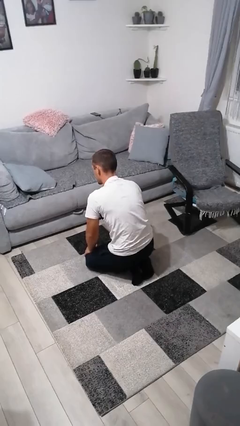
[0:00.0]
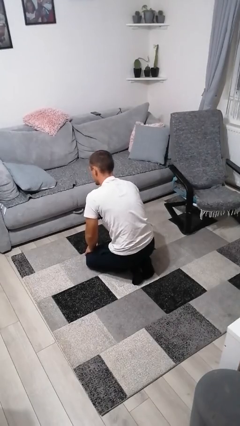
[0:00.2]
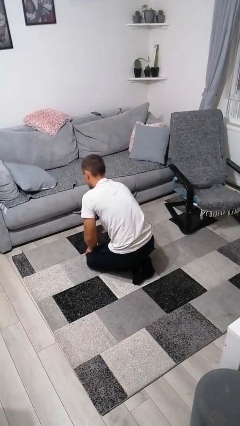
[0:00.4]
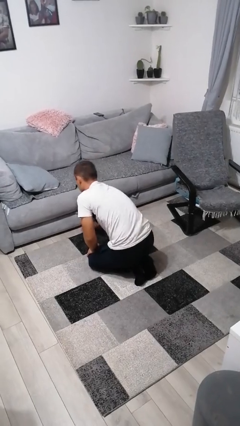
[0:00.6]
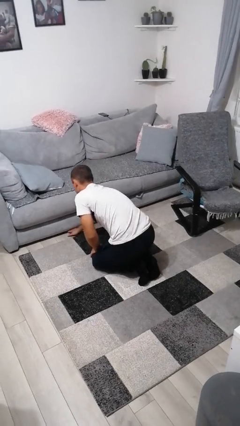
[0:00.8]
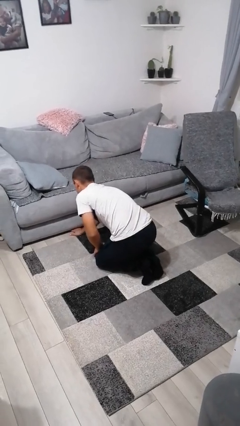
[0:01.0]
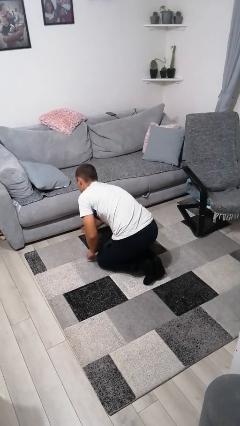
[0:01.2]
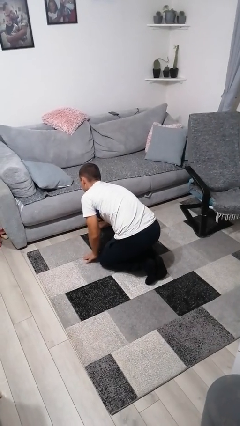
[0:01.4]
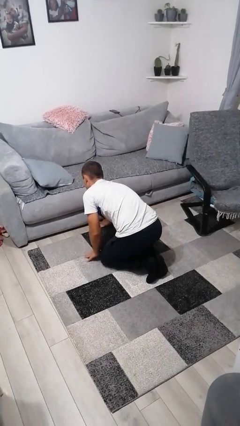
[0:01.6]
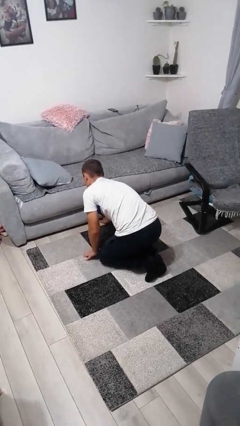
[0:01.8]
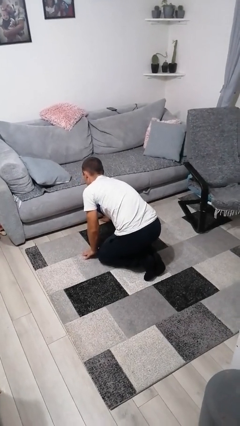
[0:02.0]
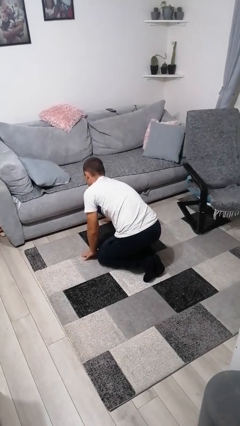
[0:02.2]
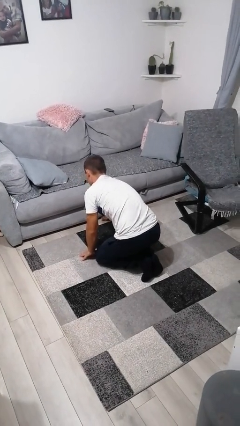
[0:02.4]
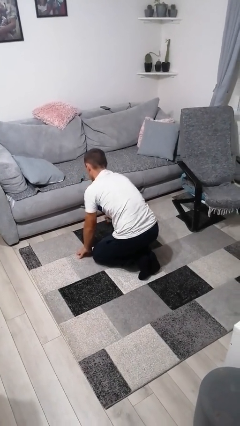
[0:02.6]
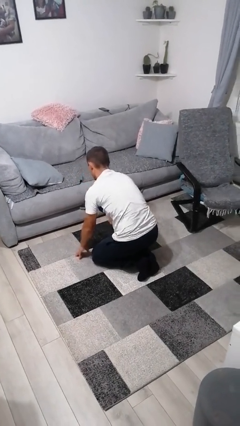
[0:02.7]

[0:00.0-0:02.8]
person searches under couch

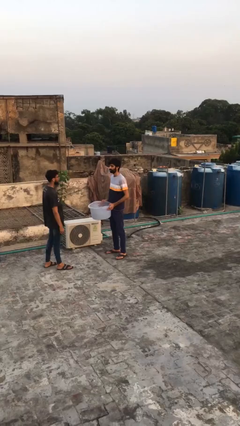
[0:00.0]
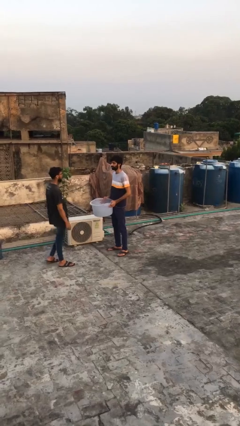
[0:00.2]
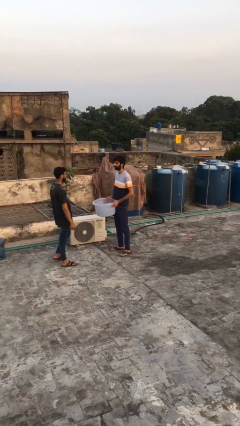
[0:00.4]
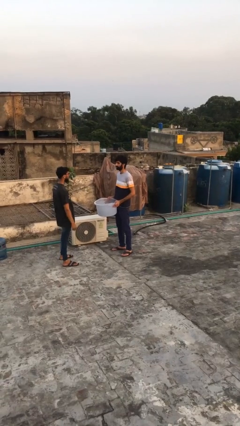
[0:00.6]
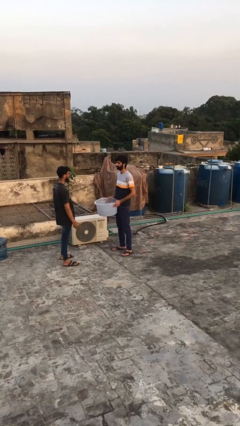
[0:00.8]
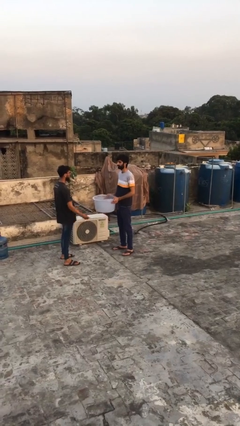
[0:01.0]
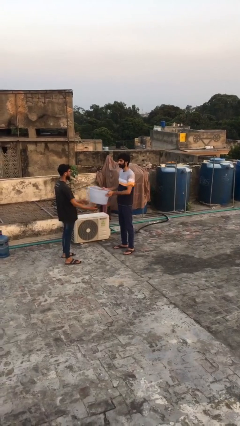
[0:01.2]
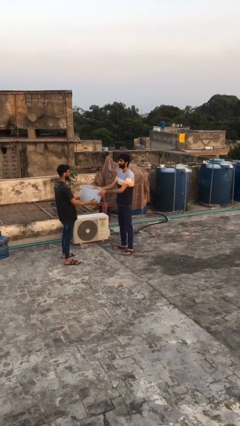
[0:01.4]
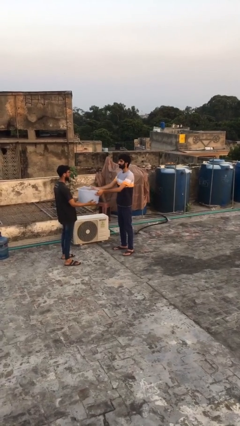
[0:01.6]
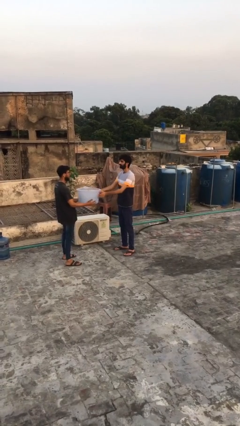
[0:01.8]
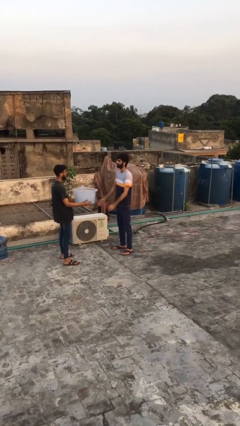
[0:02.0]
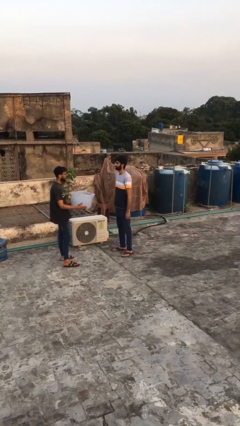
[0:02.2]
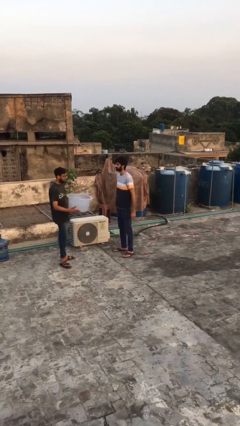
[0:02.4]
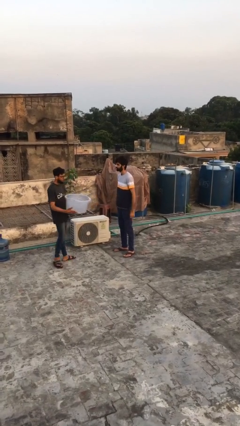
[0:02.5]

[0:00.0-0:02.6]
person transfers object to person

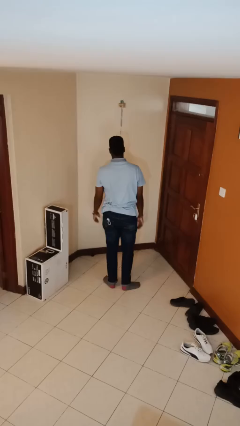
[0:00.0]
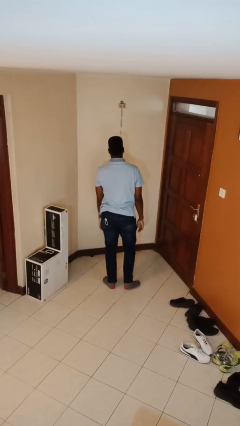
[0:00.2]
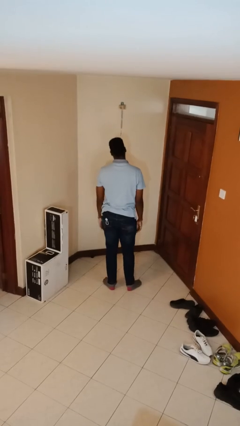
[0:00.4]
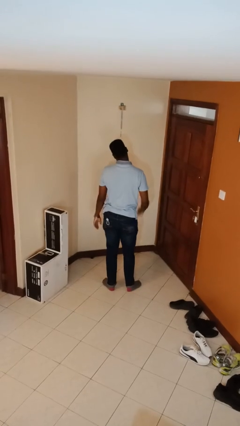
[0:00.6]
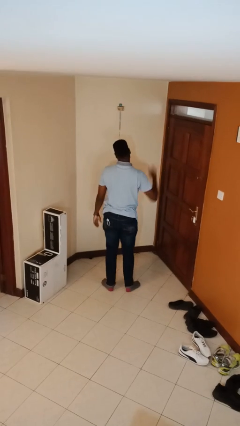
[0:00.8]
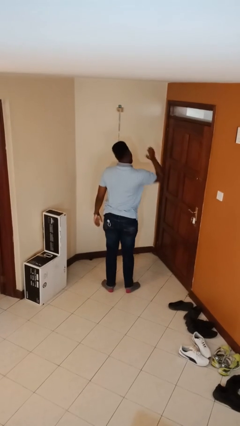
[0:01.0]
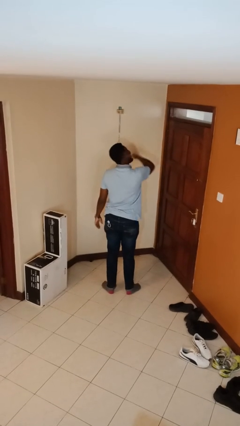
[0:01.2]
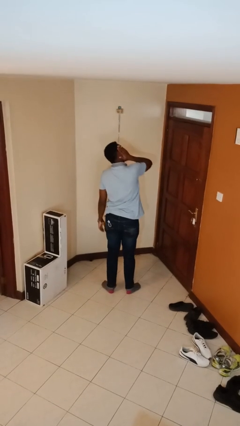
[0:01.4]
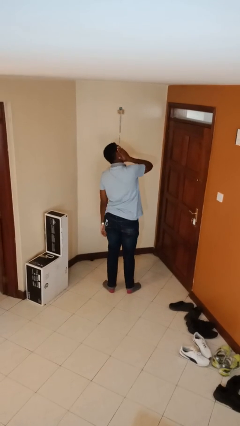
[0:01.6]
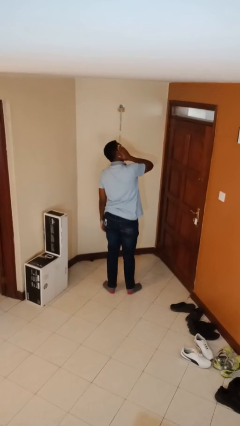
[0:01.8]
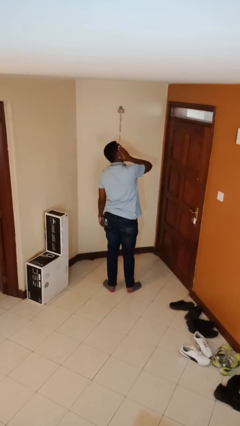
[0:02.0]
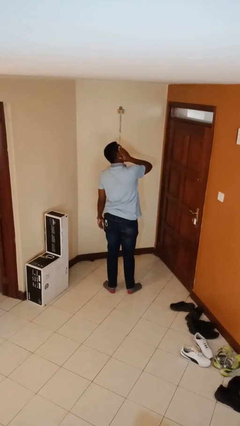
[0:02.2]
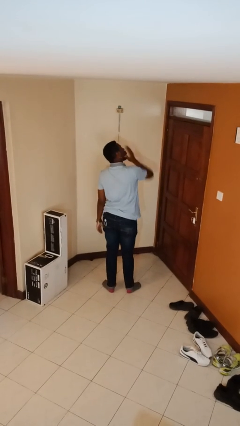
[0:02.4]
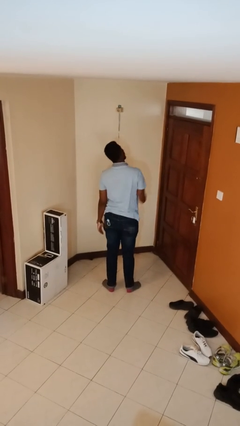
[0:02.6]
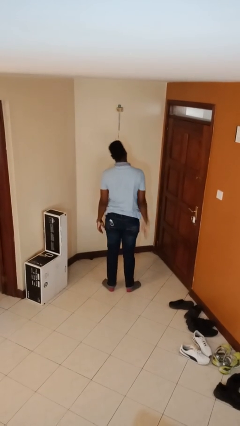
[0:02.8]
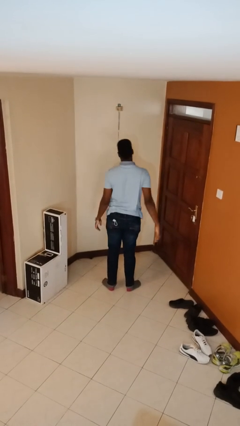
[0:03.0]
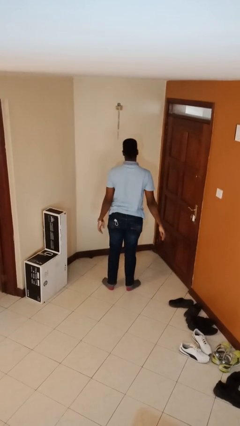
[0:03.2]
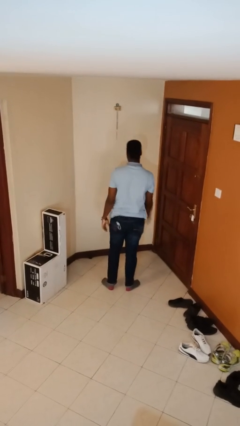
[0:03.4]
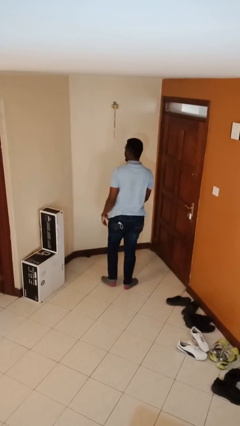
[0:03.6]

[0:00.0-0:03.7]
person swats bug

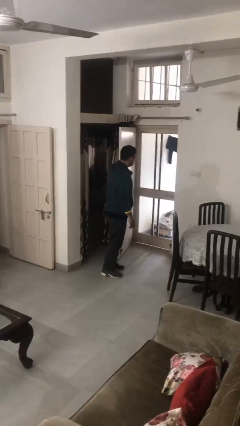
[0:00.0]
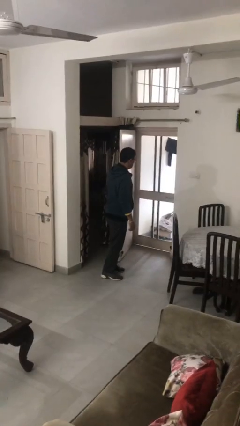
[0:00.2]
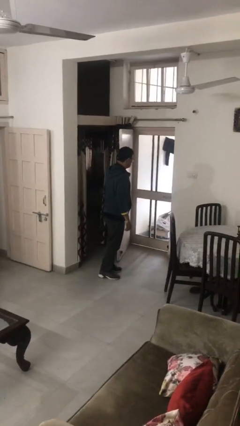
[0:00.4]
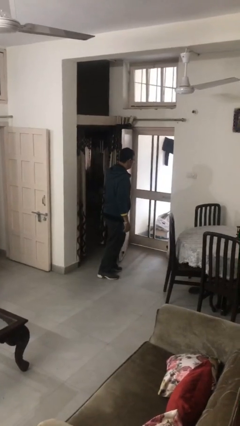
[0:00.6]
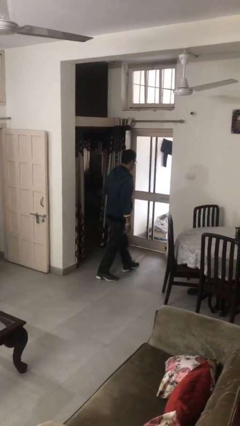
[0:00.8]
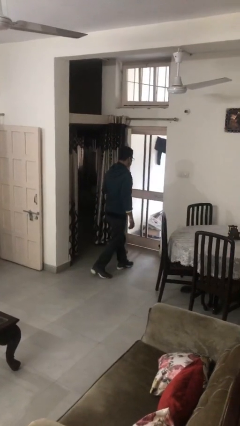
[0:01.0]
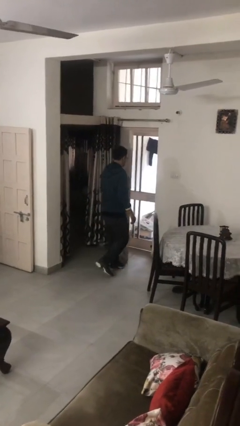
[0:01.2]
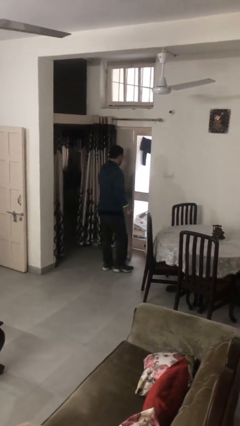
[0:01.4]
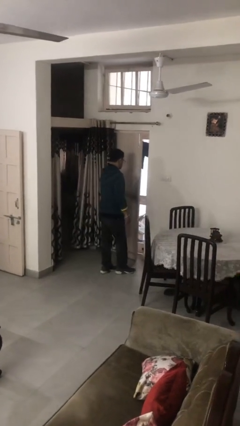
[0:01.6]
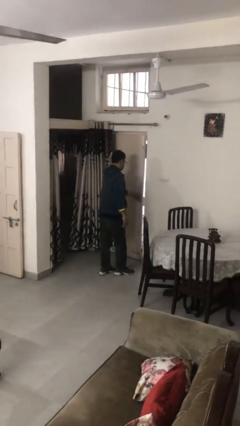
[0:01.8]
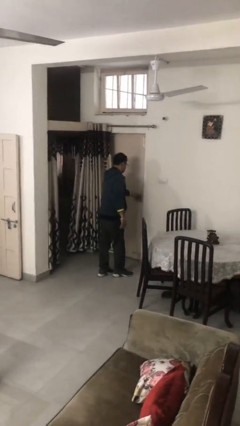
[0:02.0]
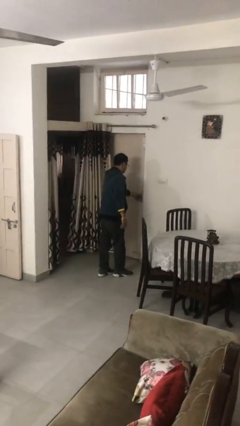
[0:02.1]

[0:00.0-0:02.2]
person closes facility door

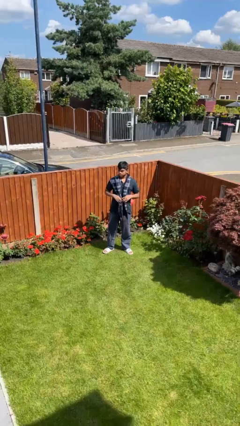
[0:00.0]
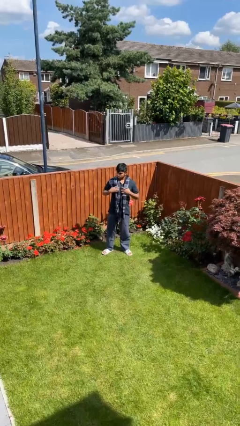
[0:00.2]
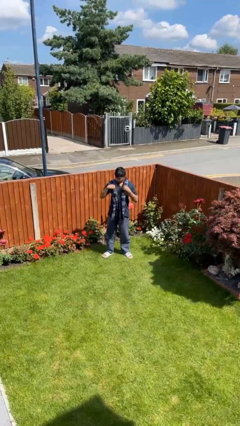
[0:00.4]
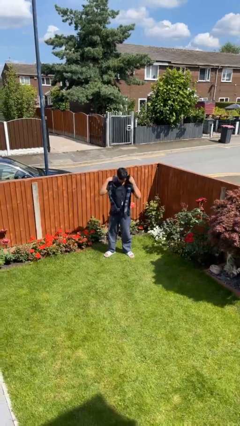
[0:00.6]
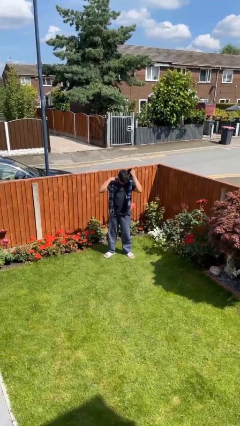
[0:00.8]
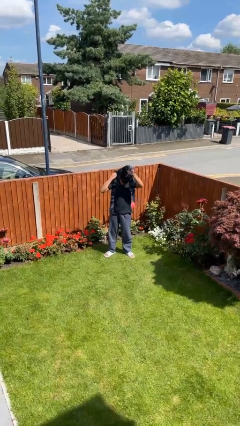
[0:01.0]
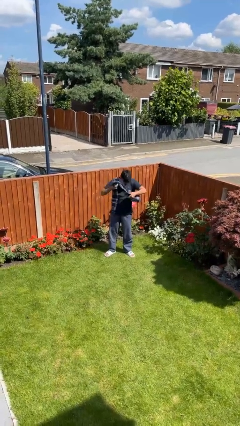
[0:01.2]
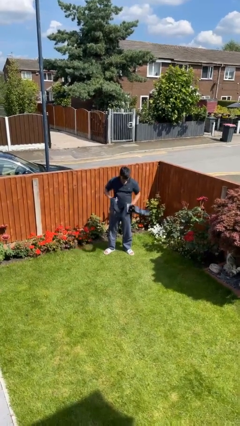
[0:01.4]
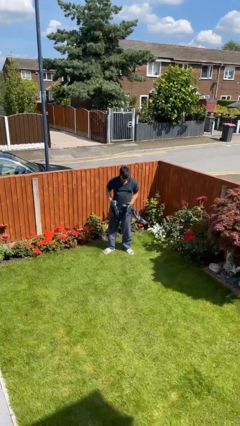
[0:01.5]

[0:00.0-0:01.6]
person takes off scarf

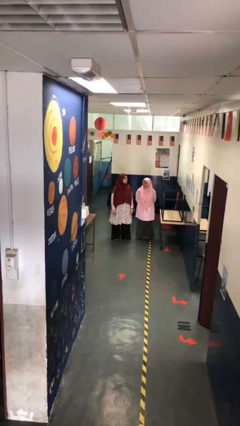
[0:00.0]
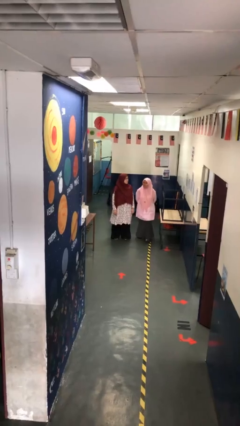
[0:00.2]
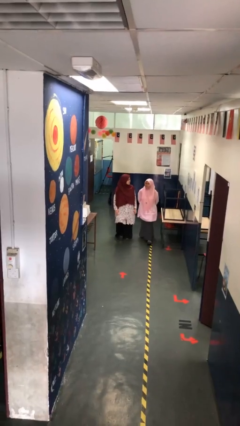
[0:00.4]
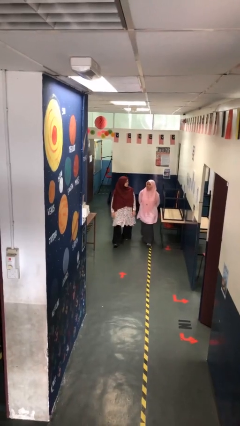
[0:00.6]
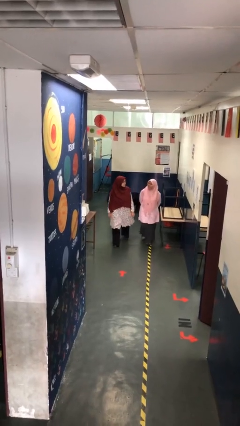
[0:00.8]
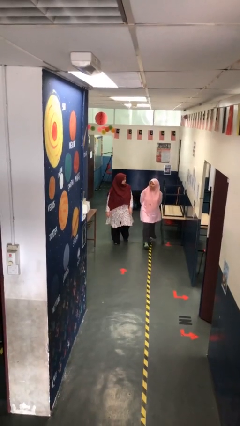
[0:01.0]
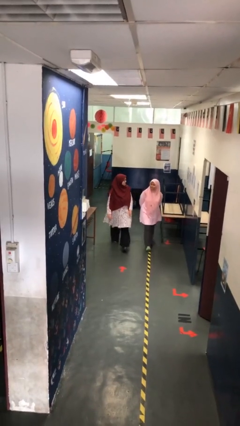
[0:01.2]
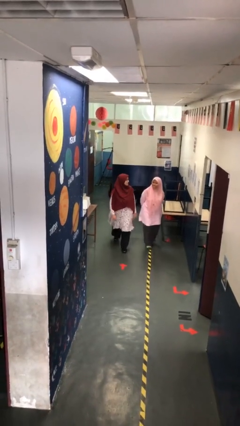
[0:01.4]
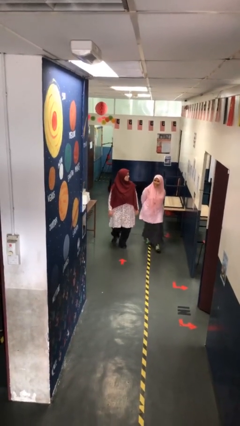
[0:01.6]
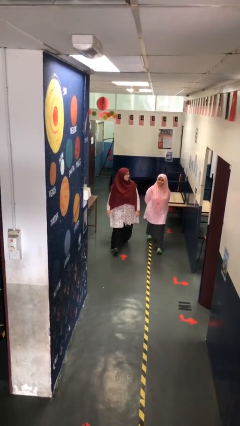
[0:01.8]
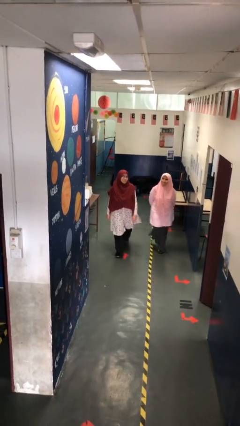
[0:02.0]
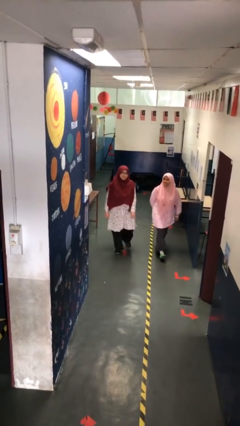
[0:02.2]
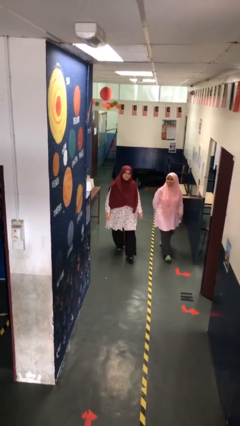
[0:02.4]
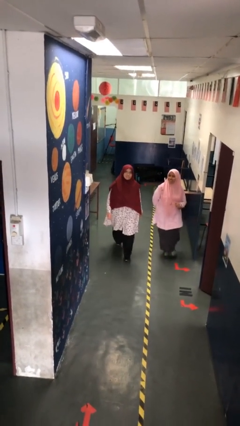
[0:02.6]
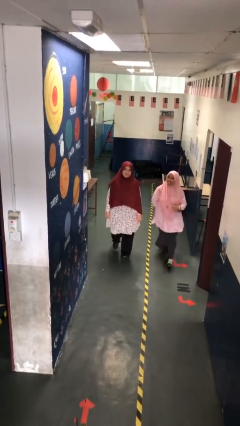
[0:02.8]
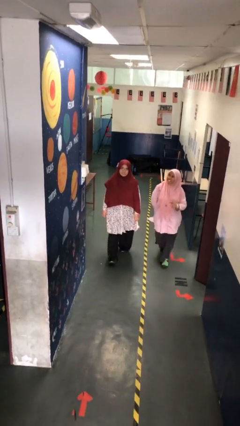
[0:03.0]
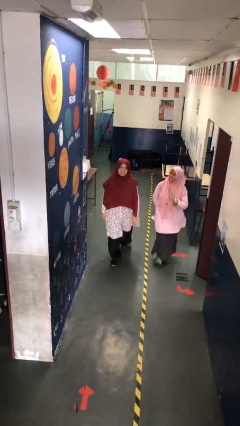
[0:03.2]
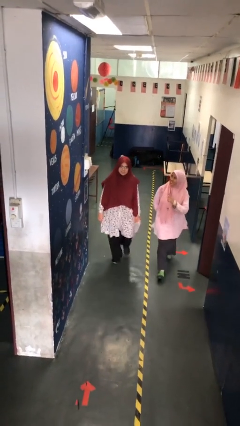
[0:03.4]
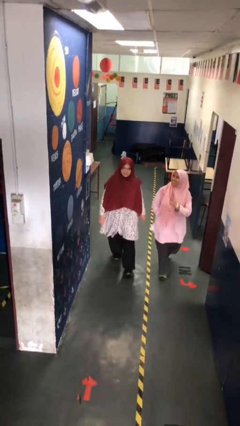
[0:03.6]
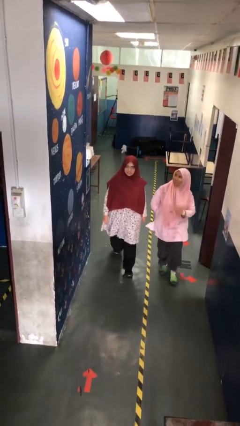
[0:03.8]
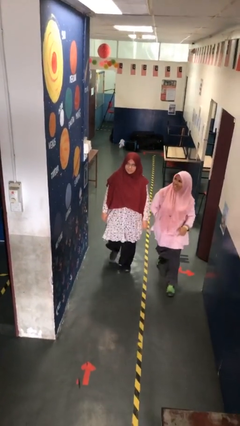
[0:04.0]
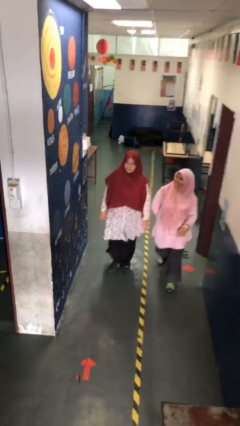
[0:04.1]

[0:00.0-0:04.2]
person talks to person

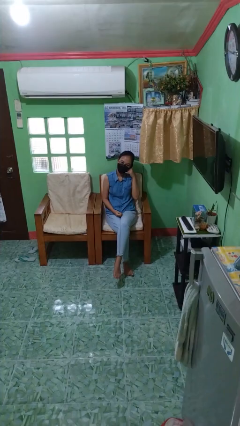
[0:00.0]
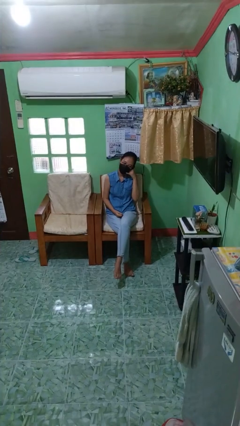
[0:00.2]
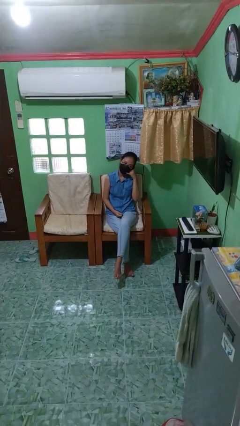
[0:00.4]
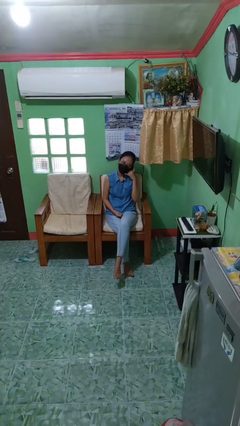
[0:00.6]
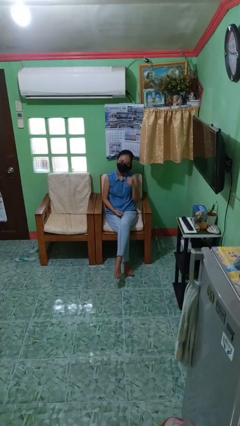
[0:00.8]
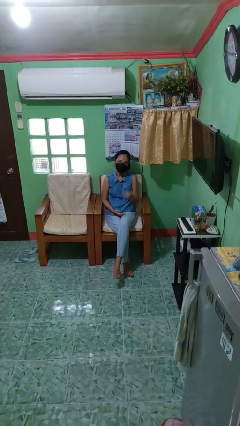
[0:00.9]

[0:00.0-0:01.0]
person gestures call me
